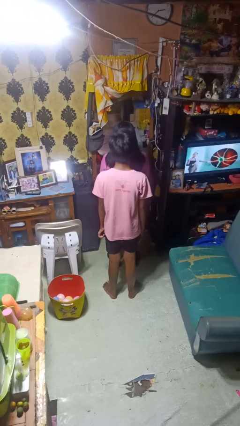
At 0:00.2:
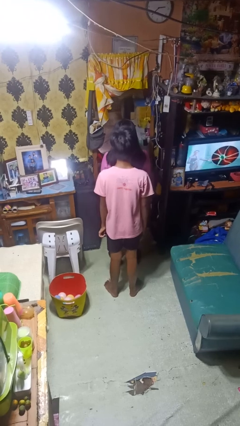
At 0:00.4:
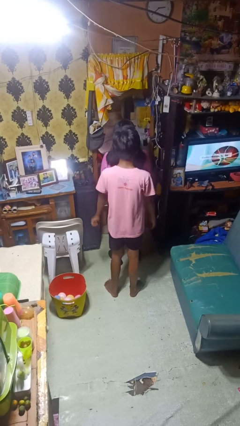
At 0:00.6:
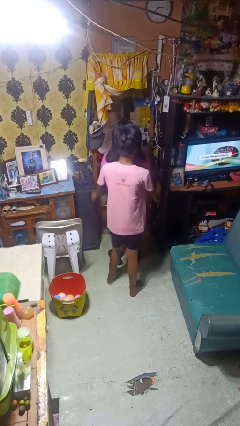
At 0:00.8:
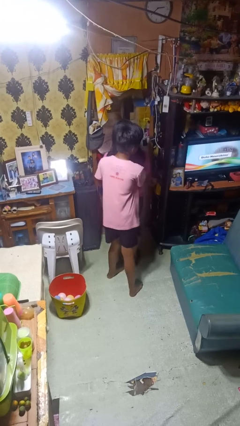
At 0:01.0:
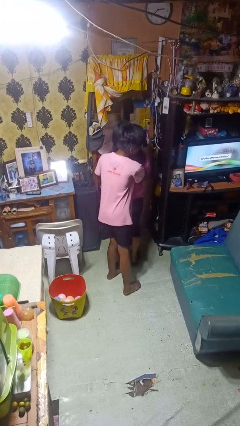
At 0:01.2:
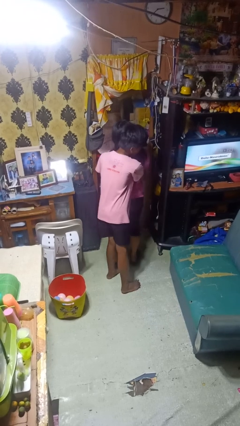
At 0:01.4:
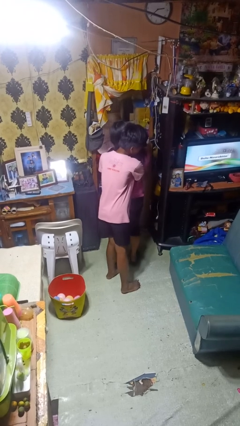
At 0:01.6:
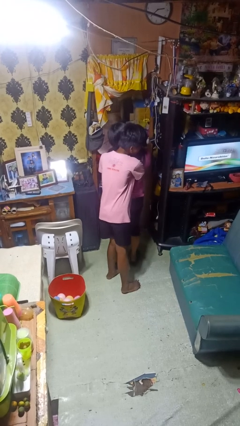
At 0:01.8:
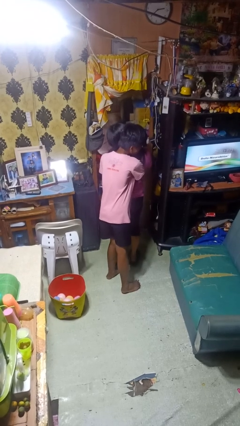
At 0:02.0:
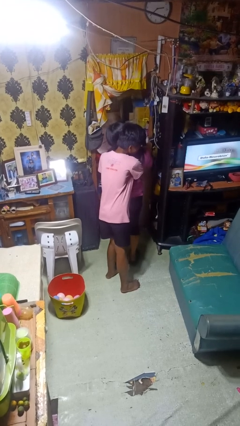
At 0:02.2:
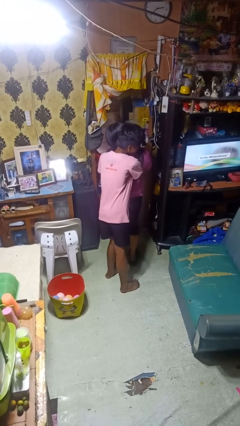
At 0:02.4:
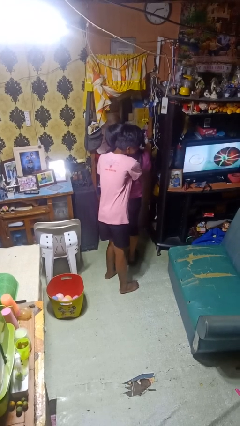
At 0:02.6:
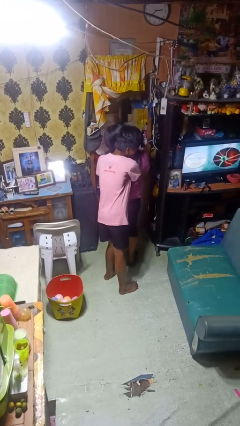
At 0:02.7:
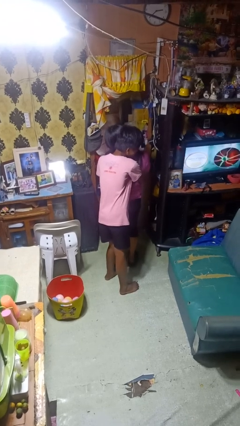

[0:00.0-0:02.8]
person hugs person from behind

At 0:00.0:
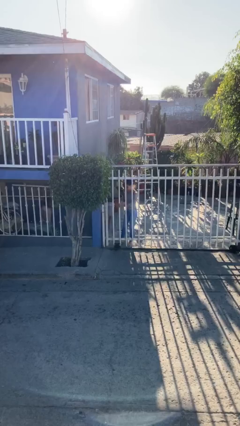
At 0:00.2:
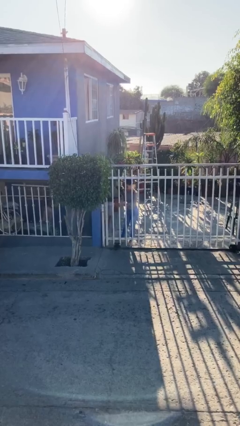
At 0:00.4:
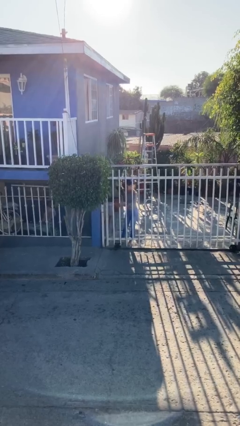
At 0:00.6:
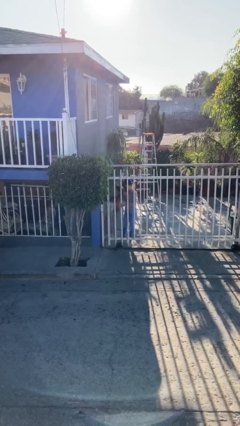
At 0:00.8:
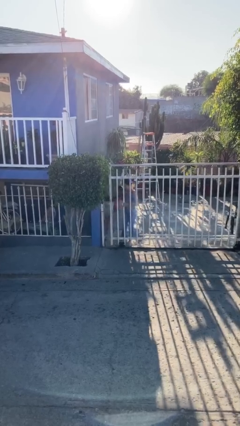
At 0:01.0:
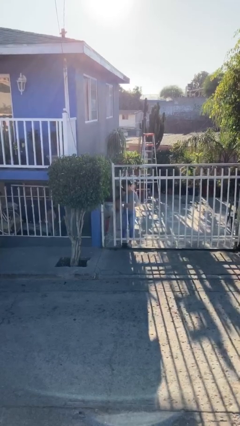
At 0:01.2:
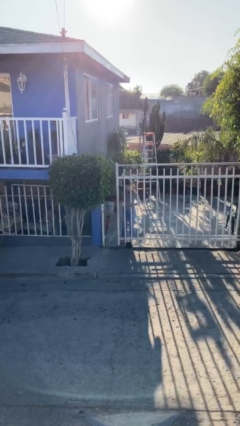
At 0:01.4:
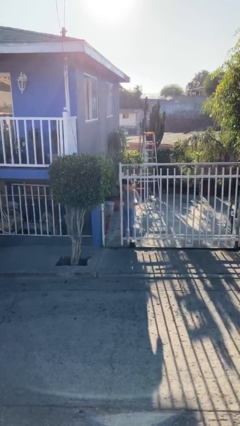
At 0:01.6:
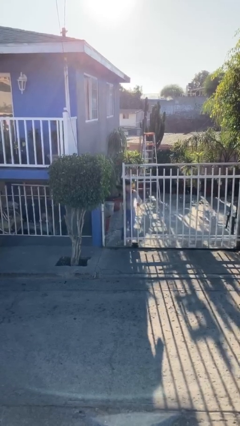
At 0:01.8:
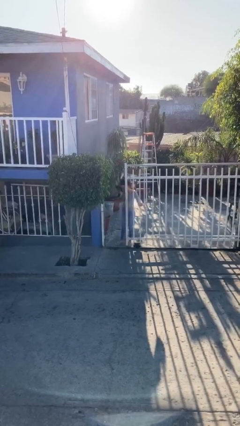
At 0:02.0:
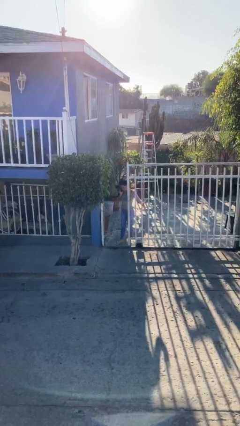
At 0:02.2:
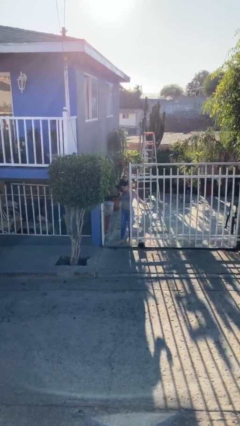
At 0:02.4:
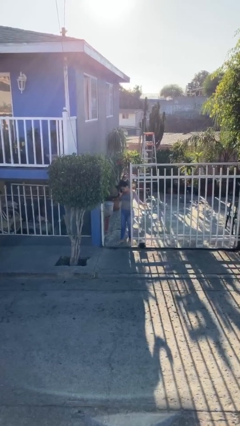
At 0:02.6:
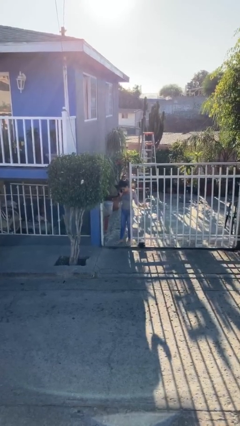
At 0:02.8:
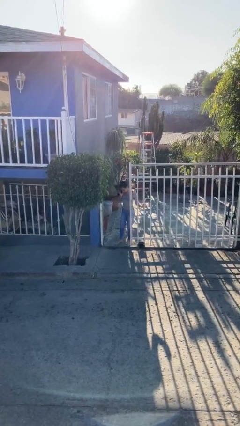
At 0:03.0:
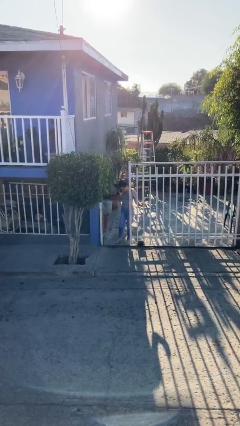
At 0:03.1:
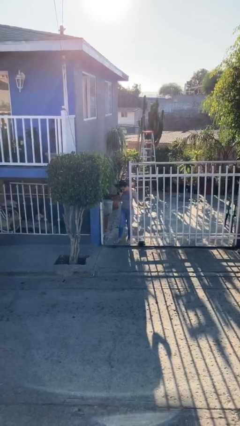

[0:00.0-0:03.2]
person opens facility door

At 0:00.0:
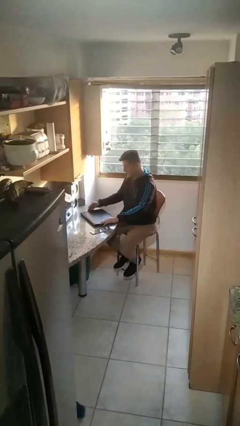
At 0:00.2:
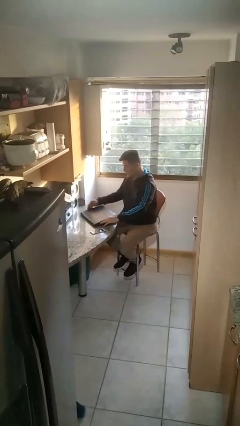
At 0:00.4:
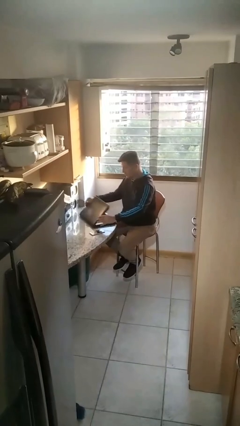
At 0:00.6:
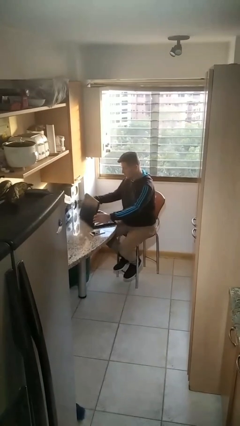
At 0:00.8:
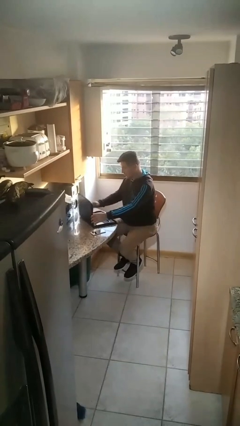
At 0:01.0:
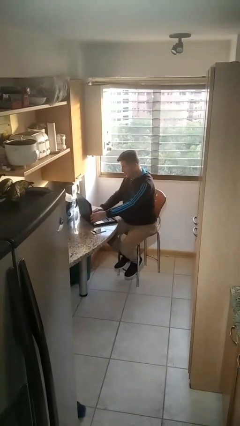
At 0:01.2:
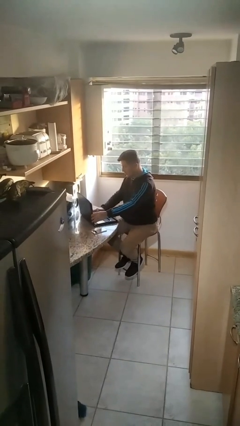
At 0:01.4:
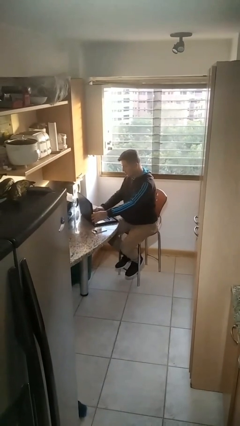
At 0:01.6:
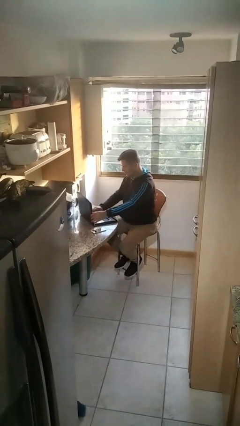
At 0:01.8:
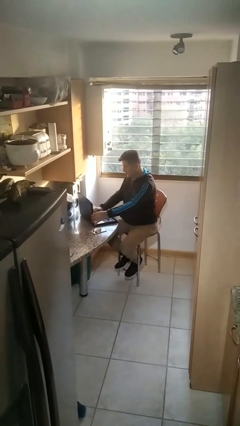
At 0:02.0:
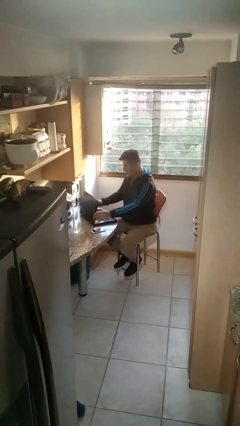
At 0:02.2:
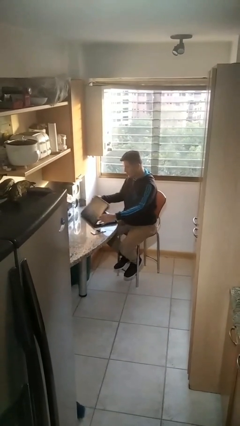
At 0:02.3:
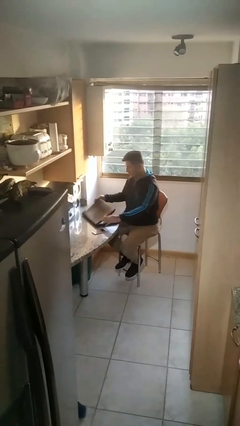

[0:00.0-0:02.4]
person interacts with laptop

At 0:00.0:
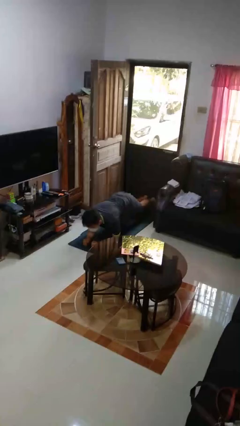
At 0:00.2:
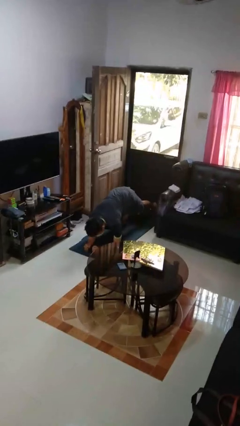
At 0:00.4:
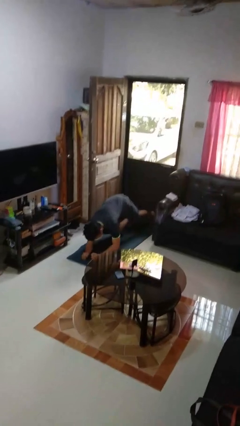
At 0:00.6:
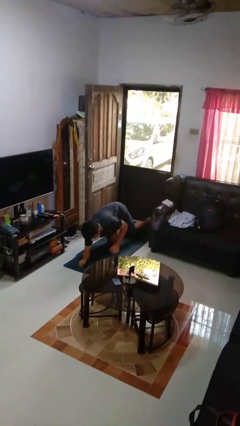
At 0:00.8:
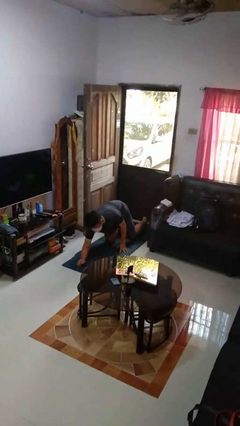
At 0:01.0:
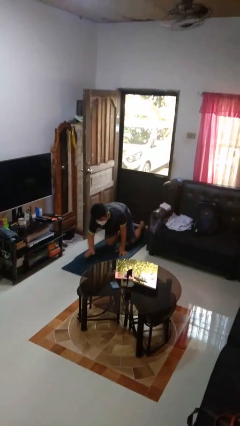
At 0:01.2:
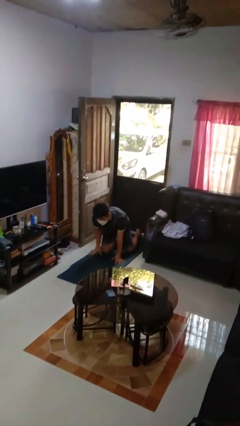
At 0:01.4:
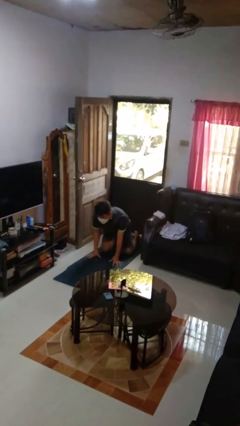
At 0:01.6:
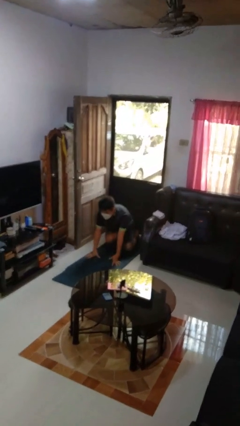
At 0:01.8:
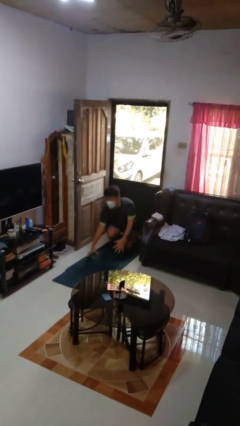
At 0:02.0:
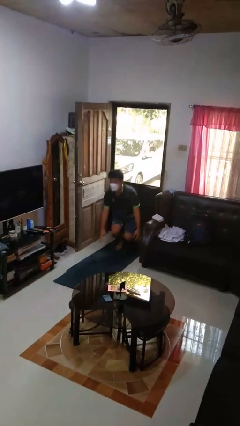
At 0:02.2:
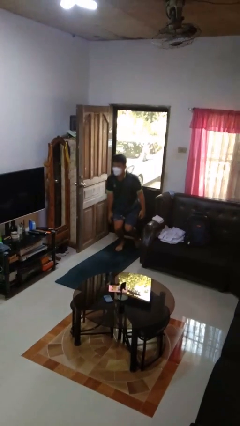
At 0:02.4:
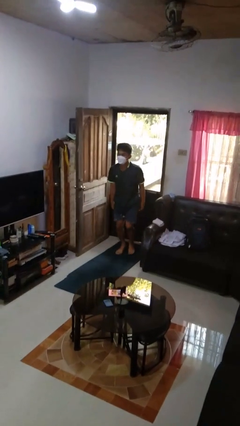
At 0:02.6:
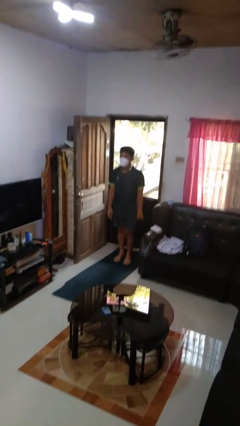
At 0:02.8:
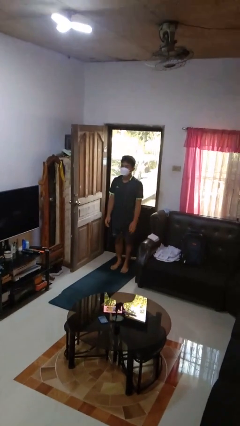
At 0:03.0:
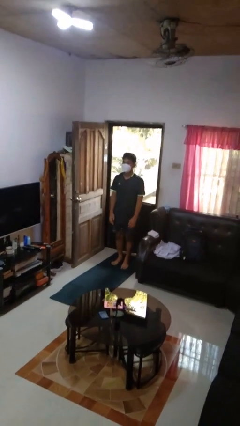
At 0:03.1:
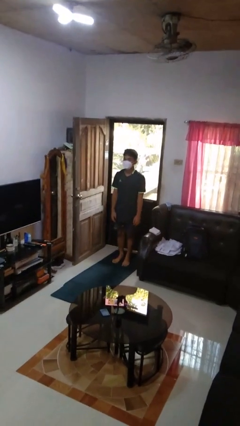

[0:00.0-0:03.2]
person stands up from floor

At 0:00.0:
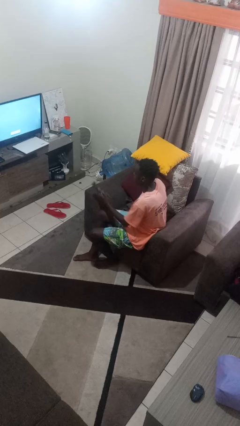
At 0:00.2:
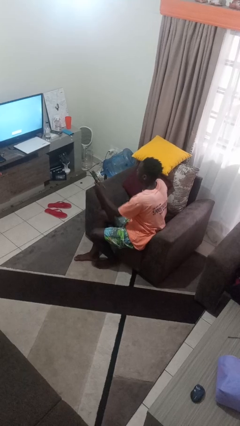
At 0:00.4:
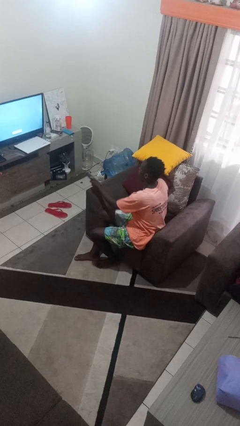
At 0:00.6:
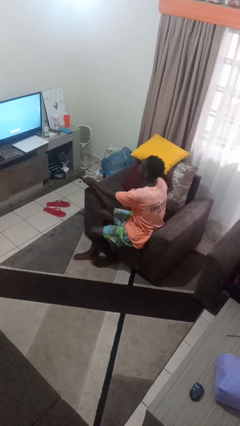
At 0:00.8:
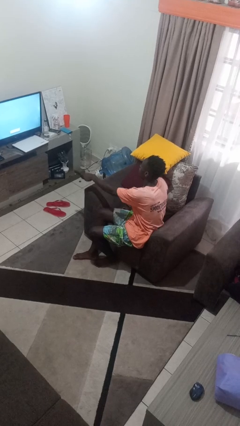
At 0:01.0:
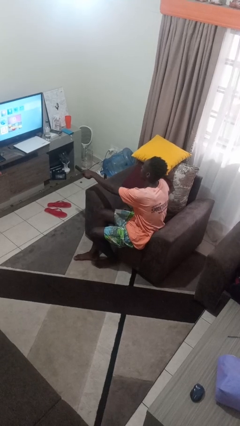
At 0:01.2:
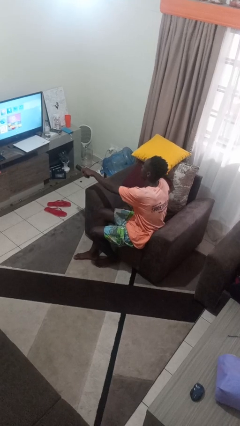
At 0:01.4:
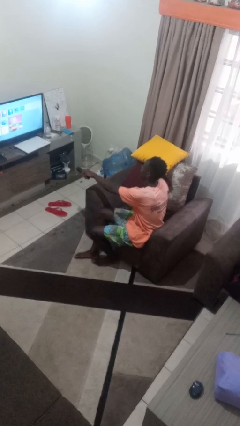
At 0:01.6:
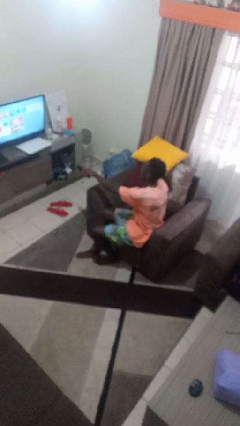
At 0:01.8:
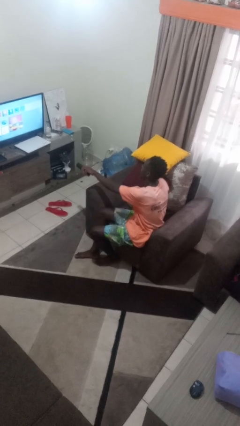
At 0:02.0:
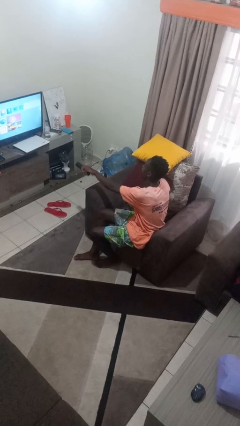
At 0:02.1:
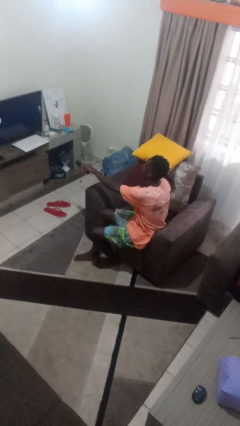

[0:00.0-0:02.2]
person uses television remote

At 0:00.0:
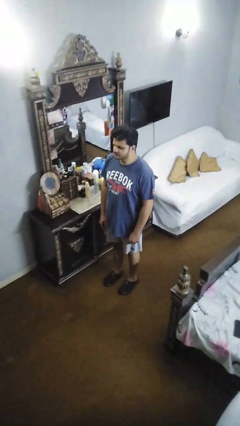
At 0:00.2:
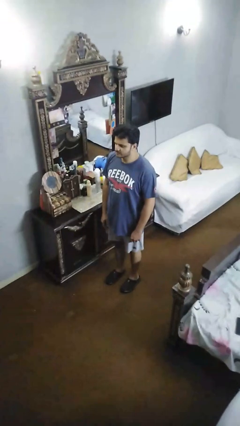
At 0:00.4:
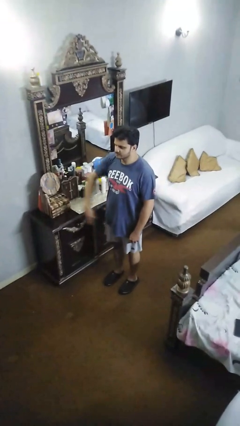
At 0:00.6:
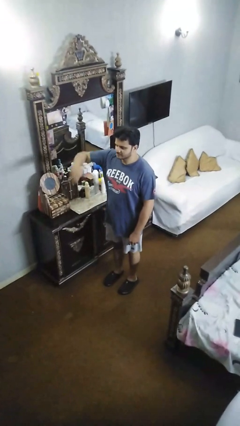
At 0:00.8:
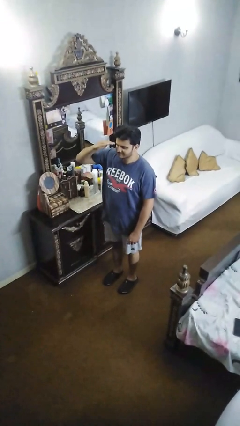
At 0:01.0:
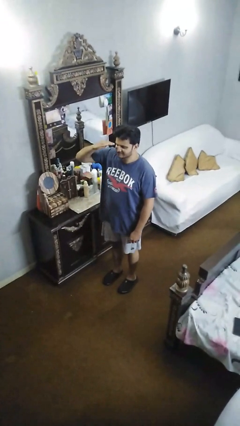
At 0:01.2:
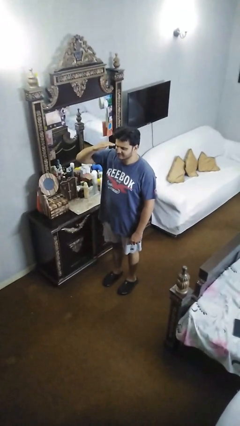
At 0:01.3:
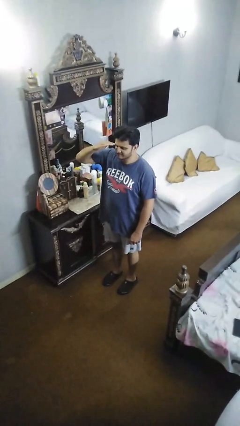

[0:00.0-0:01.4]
person salutes

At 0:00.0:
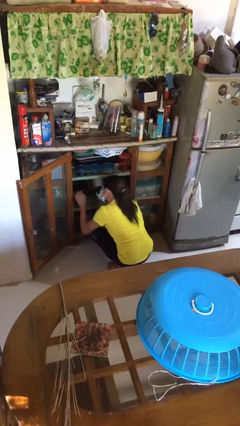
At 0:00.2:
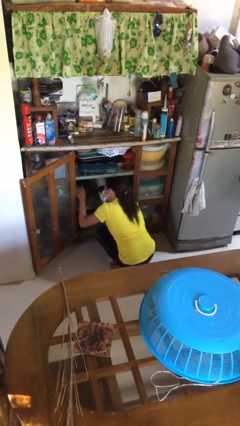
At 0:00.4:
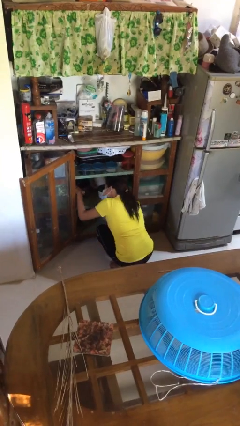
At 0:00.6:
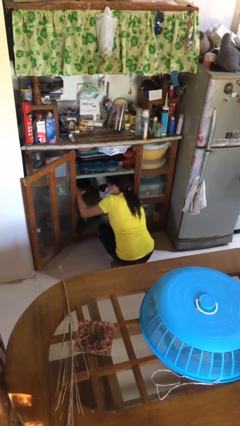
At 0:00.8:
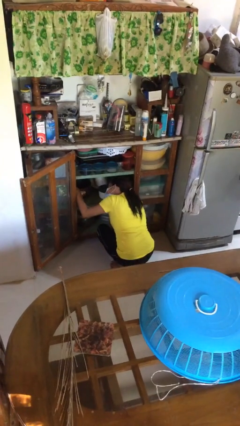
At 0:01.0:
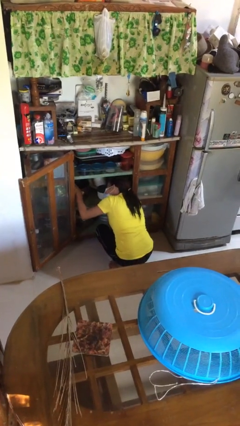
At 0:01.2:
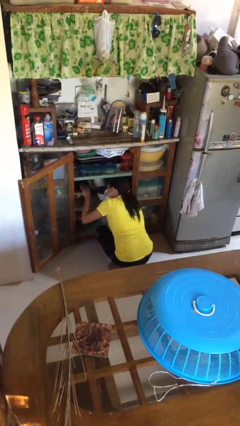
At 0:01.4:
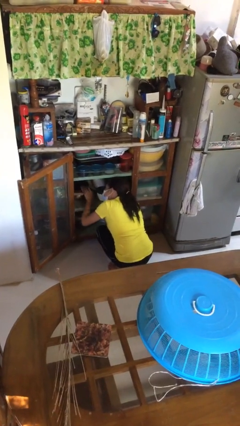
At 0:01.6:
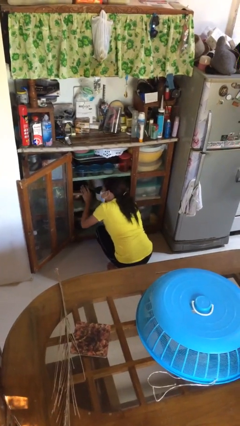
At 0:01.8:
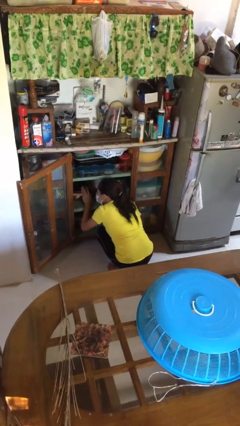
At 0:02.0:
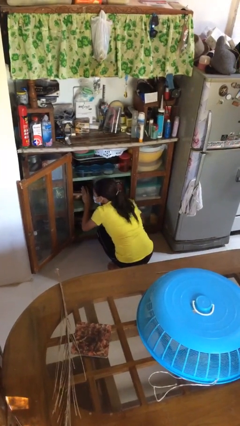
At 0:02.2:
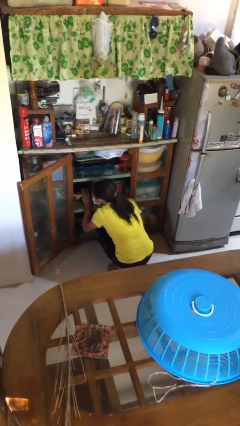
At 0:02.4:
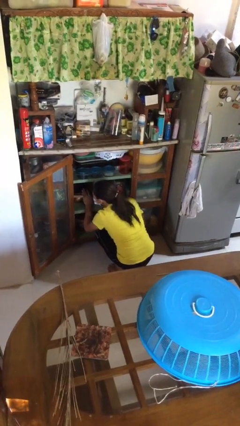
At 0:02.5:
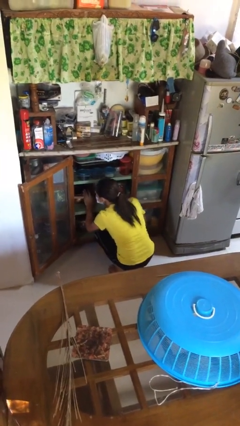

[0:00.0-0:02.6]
person searches in cabinet
